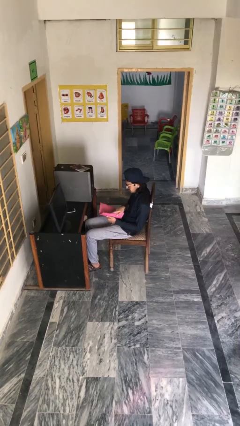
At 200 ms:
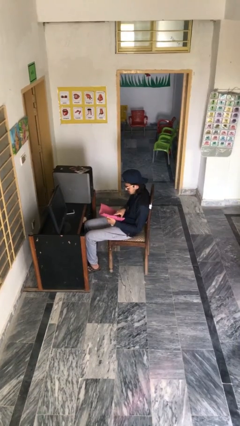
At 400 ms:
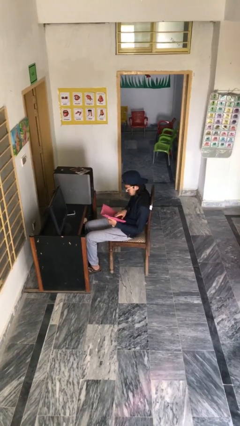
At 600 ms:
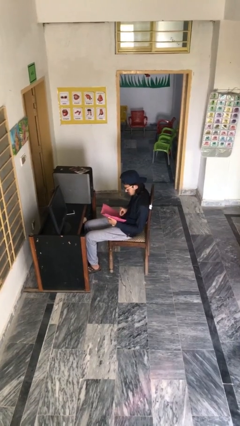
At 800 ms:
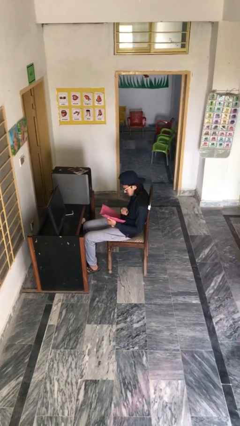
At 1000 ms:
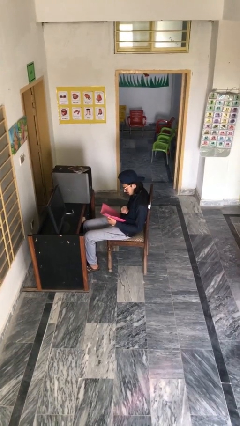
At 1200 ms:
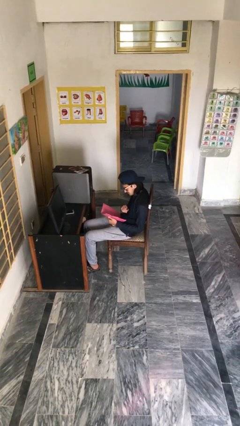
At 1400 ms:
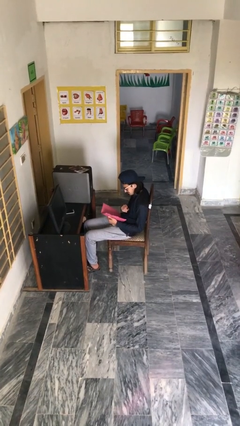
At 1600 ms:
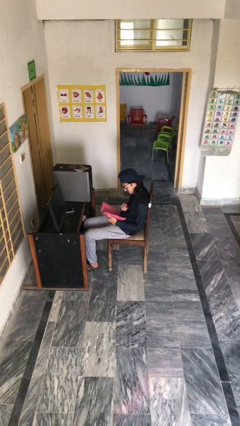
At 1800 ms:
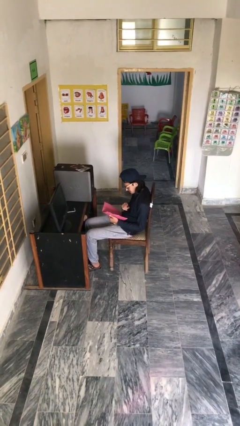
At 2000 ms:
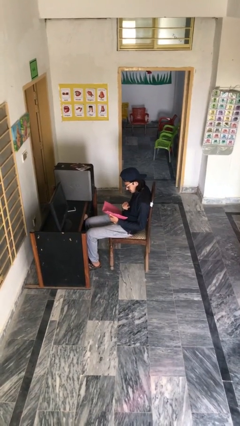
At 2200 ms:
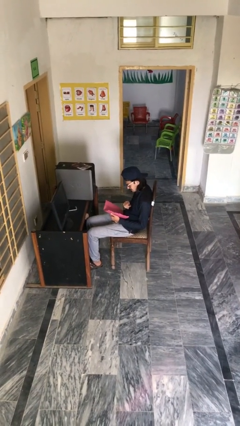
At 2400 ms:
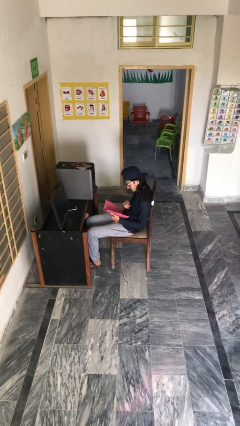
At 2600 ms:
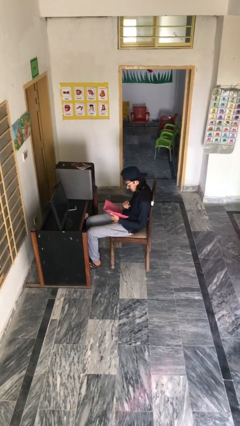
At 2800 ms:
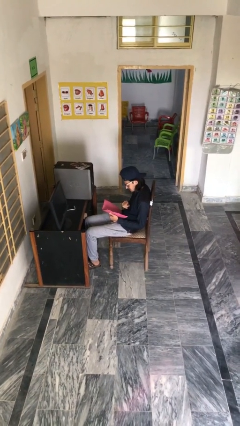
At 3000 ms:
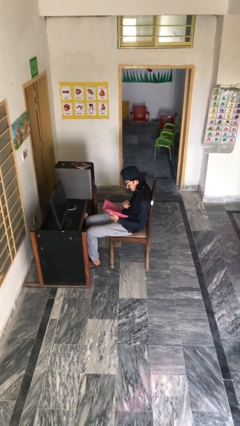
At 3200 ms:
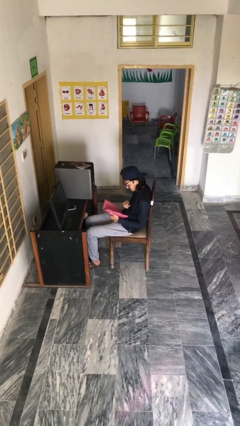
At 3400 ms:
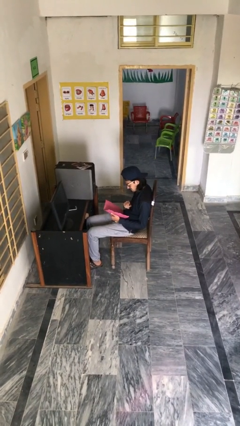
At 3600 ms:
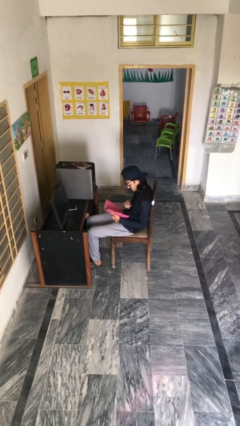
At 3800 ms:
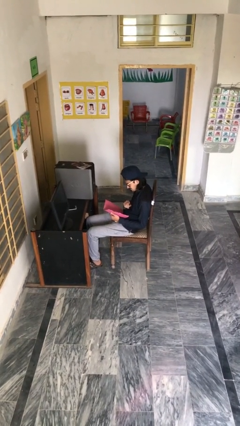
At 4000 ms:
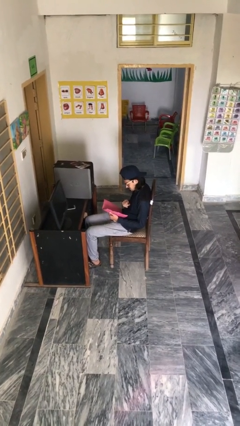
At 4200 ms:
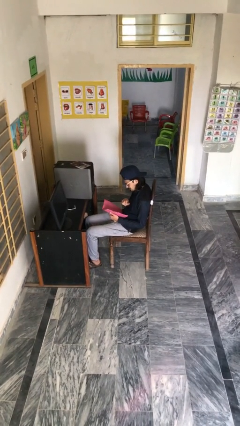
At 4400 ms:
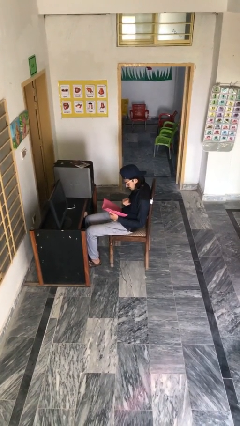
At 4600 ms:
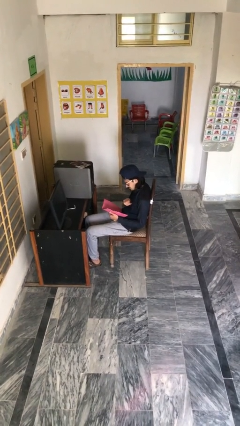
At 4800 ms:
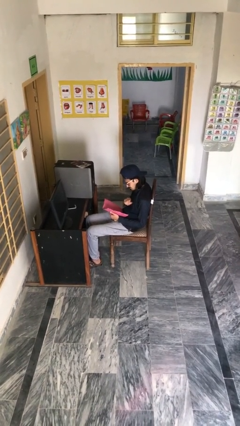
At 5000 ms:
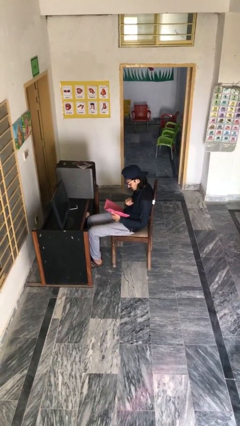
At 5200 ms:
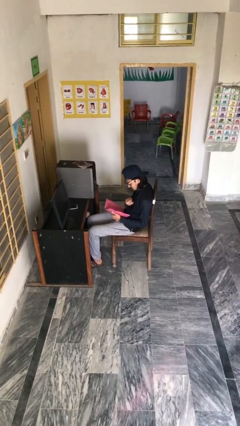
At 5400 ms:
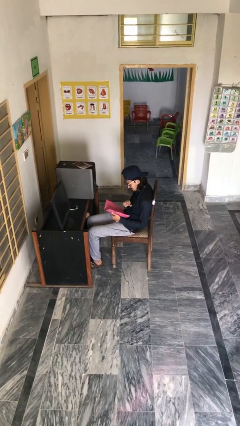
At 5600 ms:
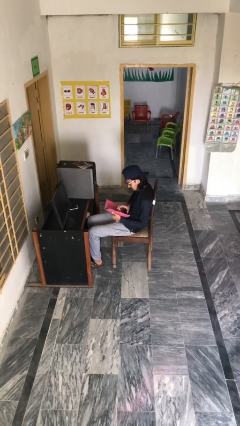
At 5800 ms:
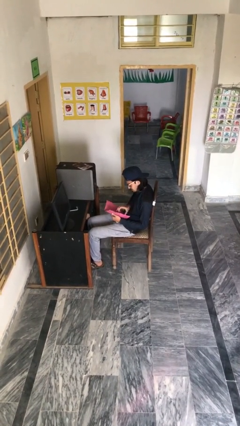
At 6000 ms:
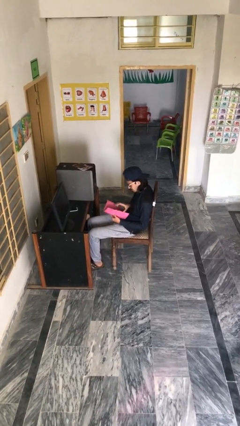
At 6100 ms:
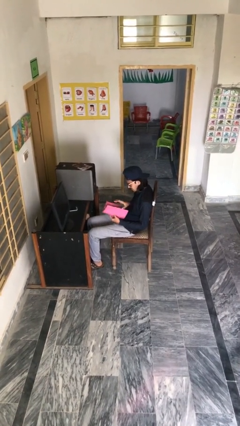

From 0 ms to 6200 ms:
person reads document

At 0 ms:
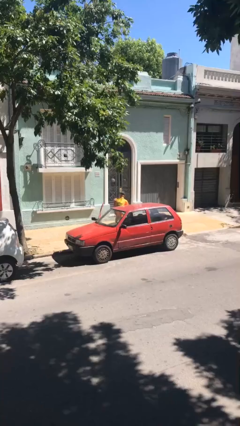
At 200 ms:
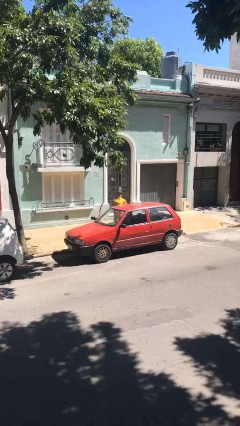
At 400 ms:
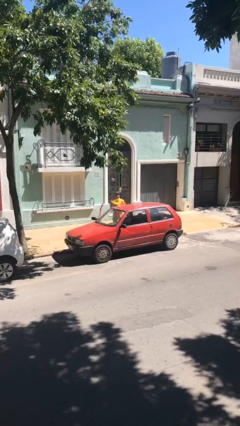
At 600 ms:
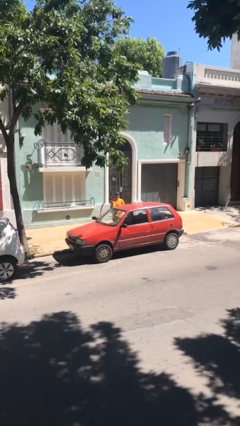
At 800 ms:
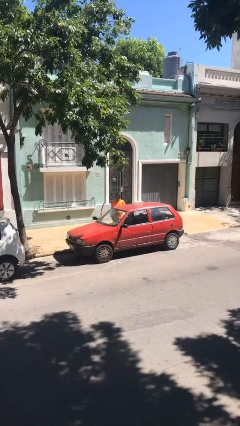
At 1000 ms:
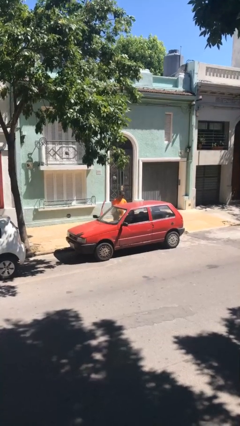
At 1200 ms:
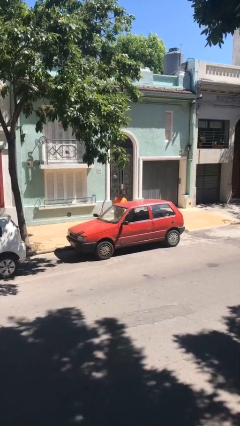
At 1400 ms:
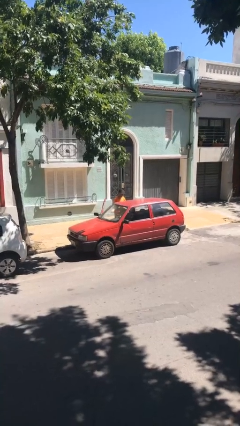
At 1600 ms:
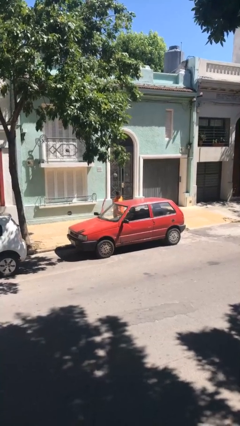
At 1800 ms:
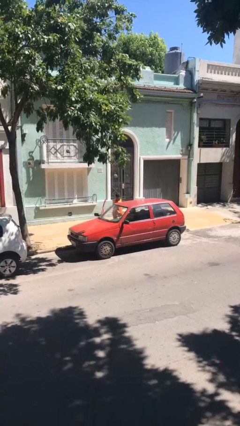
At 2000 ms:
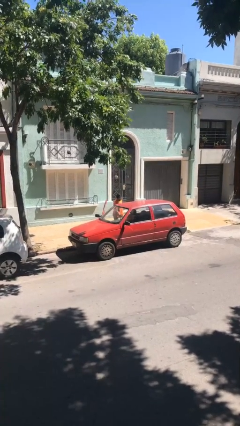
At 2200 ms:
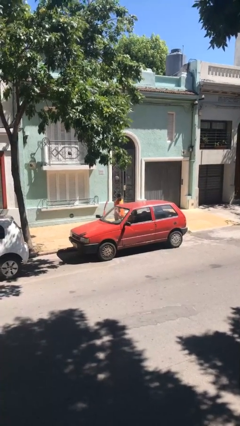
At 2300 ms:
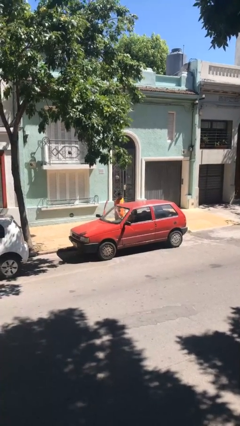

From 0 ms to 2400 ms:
person loads car

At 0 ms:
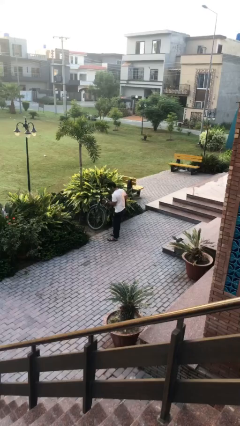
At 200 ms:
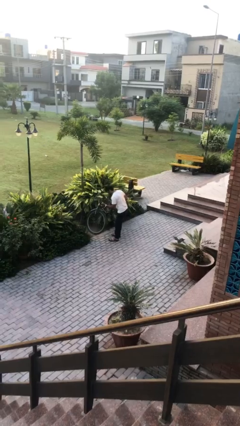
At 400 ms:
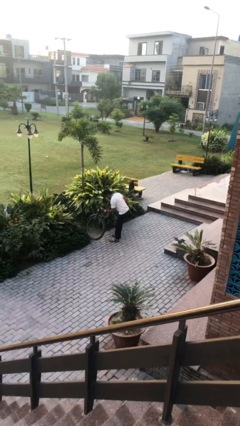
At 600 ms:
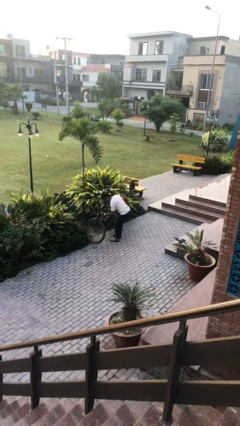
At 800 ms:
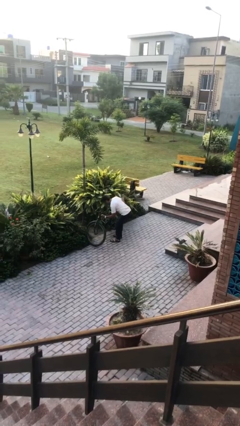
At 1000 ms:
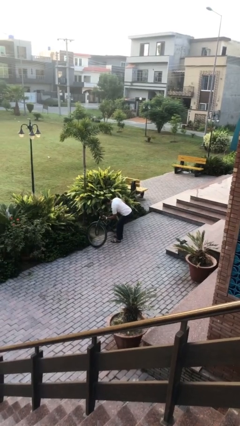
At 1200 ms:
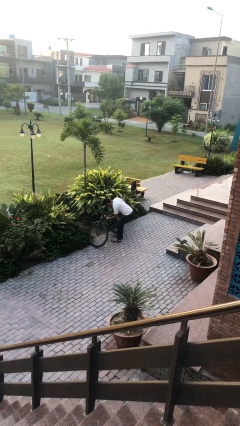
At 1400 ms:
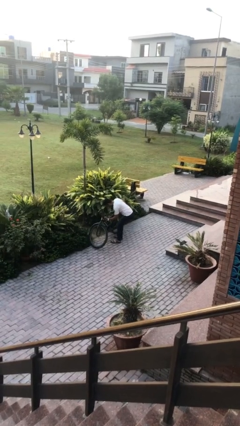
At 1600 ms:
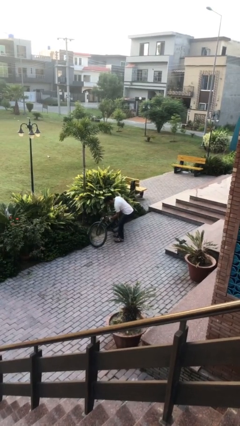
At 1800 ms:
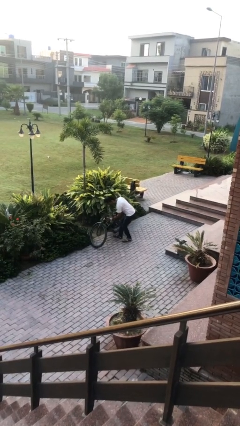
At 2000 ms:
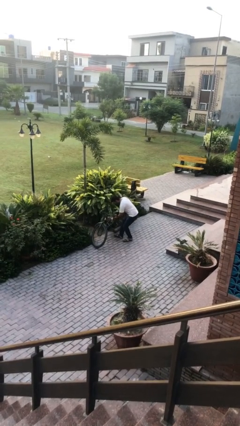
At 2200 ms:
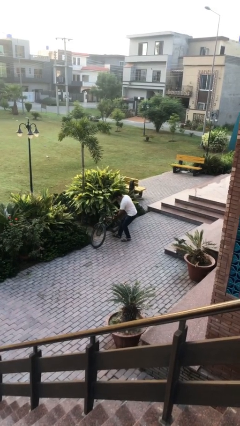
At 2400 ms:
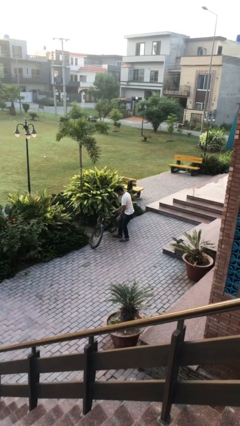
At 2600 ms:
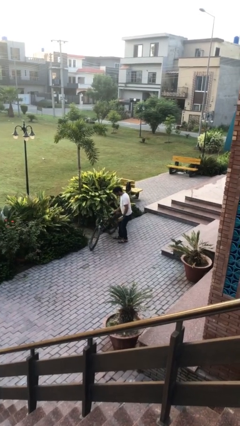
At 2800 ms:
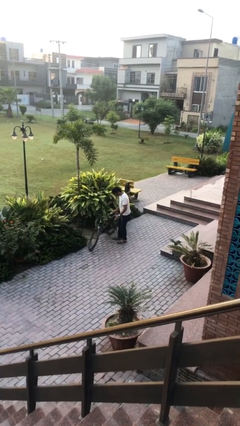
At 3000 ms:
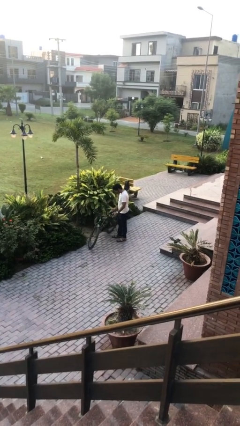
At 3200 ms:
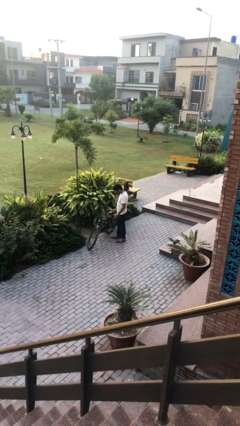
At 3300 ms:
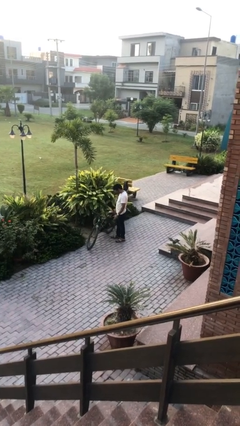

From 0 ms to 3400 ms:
person puts down object on floor

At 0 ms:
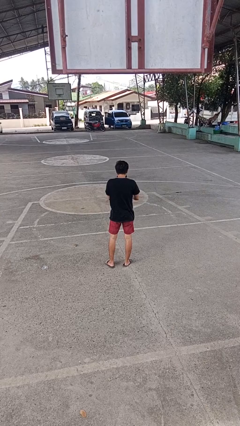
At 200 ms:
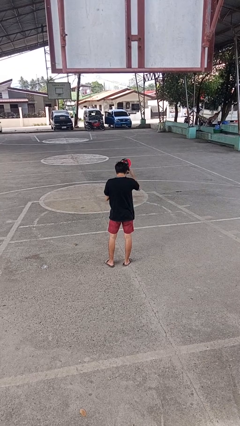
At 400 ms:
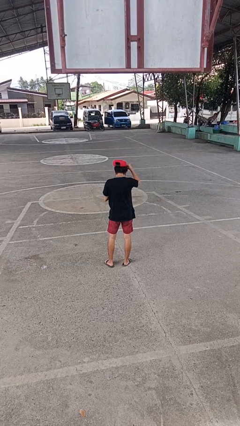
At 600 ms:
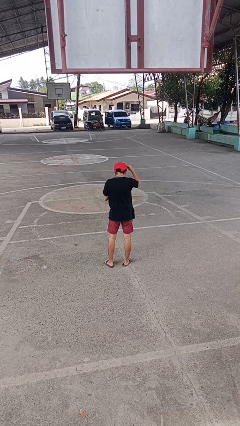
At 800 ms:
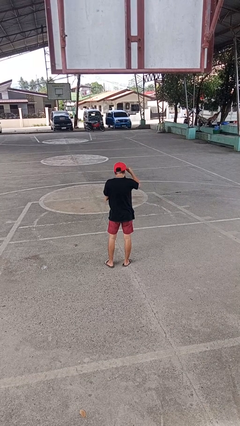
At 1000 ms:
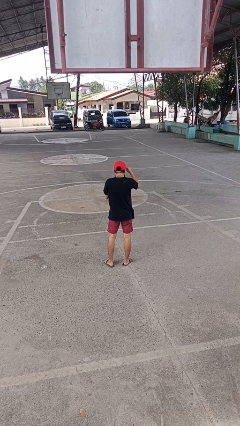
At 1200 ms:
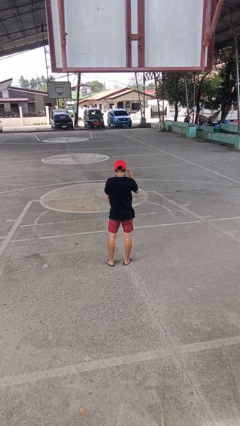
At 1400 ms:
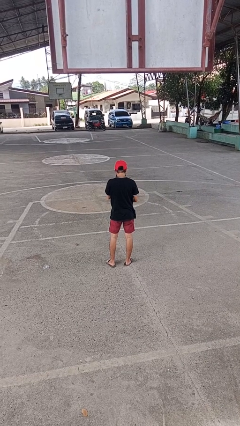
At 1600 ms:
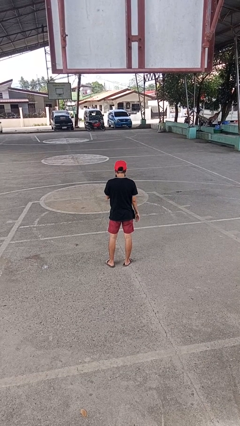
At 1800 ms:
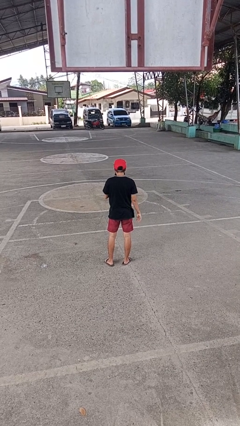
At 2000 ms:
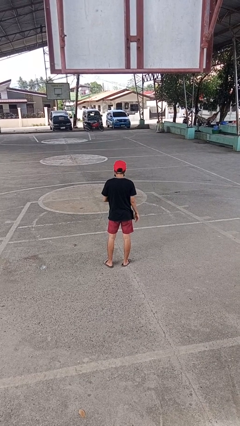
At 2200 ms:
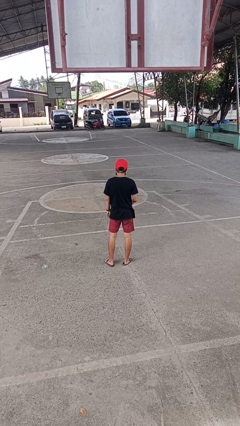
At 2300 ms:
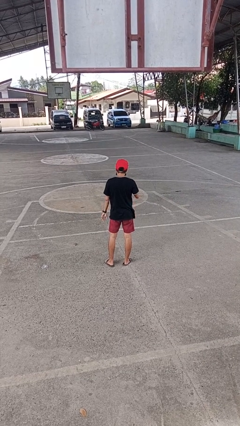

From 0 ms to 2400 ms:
person puts on hat

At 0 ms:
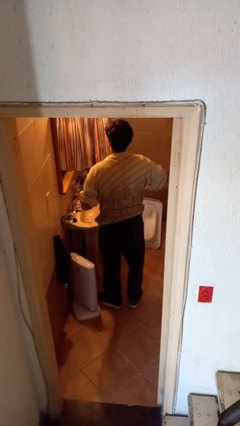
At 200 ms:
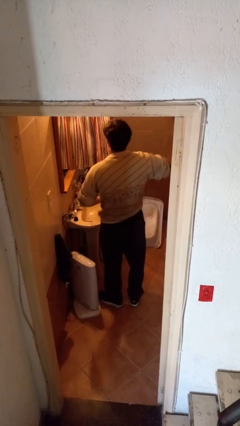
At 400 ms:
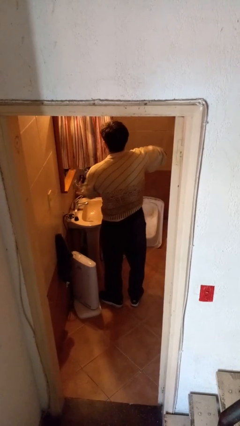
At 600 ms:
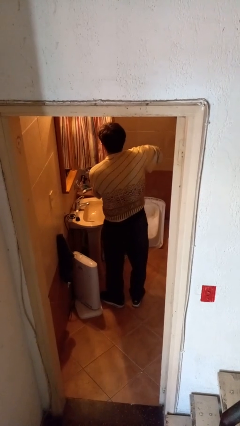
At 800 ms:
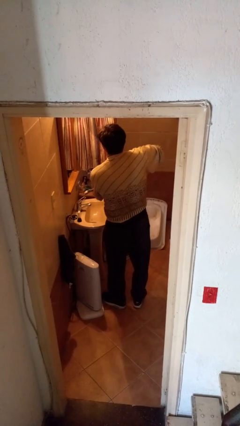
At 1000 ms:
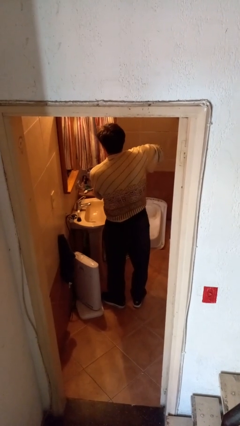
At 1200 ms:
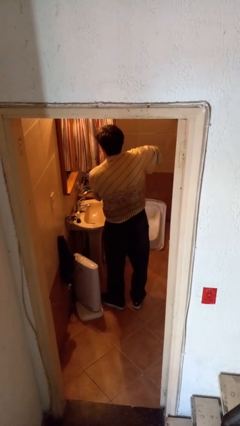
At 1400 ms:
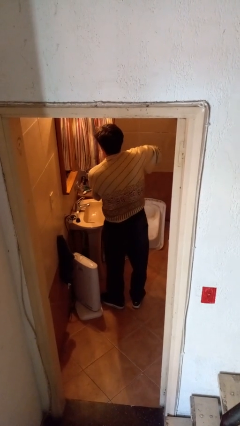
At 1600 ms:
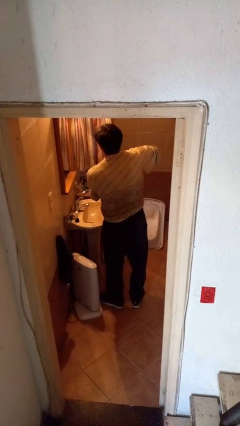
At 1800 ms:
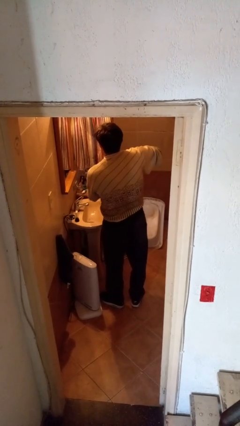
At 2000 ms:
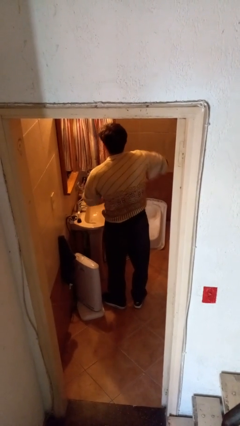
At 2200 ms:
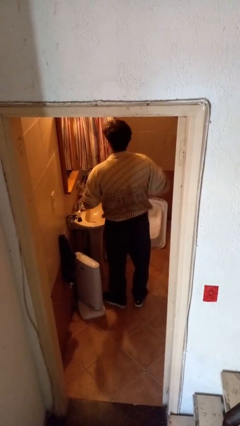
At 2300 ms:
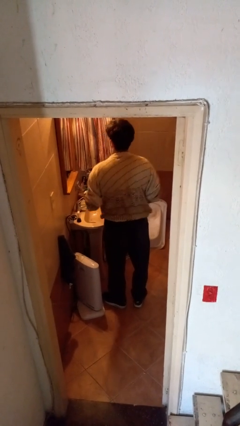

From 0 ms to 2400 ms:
person applies deodorant

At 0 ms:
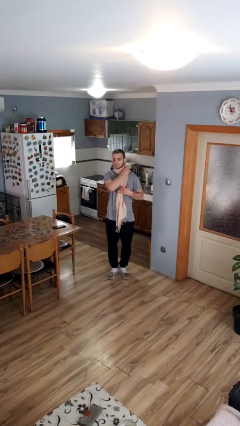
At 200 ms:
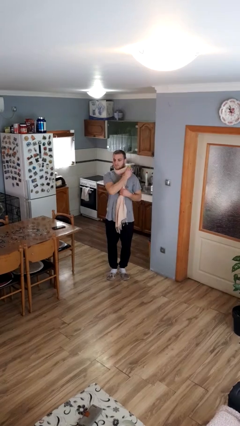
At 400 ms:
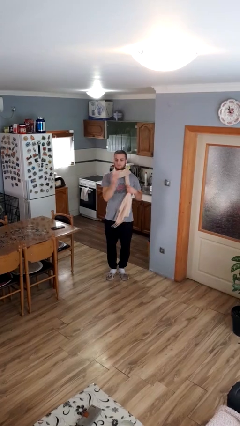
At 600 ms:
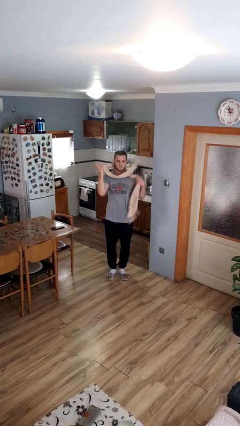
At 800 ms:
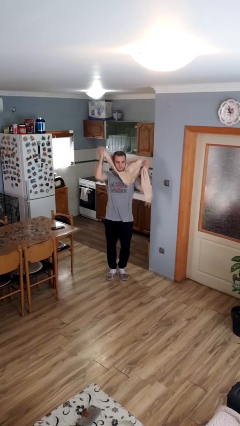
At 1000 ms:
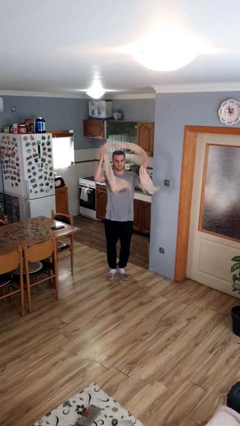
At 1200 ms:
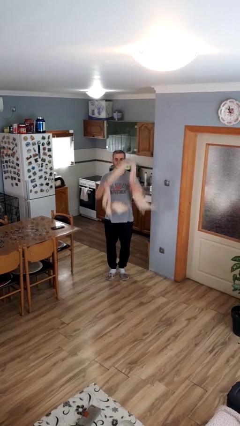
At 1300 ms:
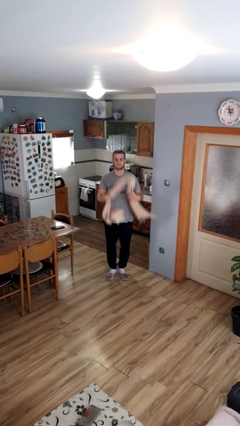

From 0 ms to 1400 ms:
person takes off scarf
